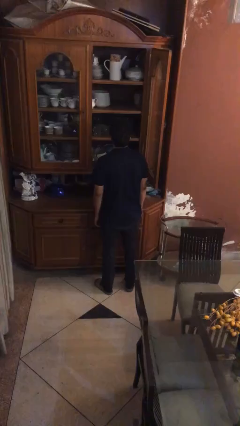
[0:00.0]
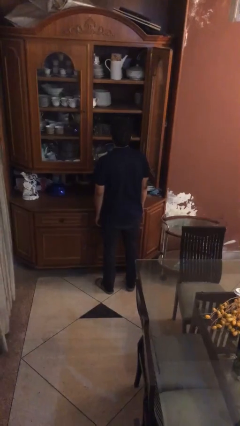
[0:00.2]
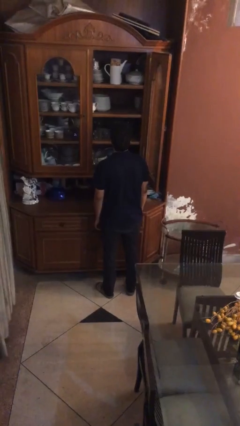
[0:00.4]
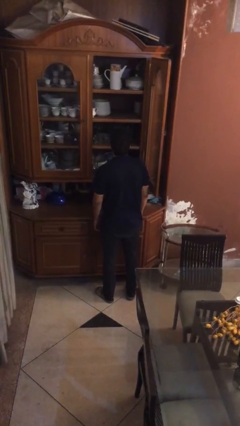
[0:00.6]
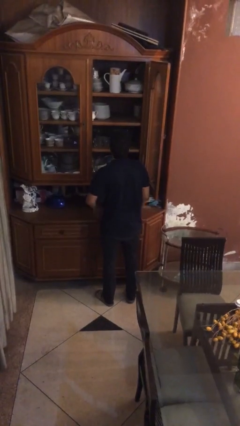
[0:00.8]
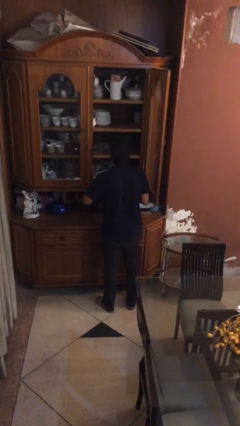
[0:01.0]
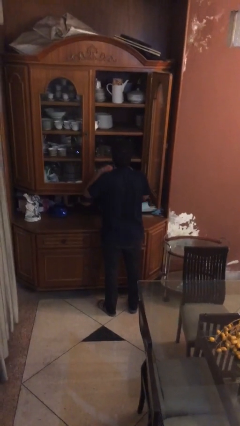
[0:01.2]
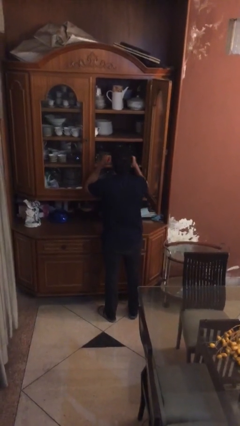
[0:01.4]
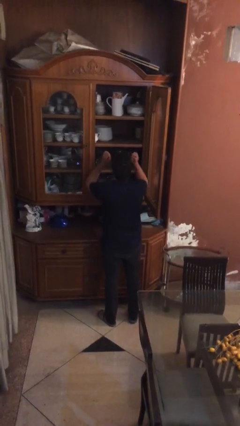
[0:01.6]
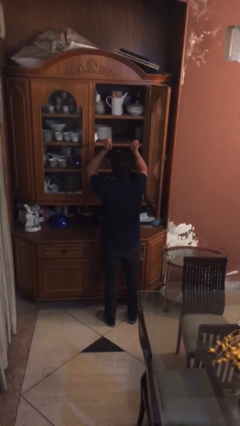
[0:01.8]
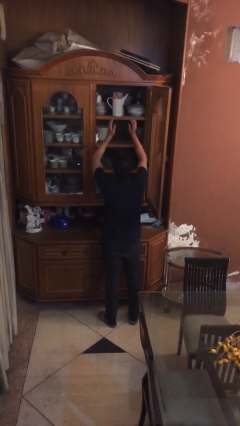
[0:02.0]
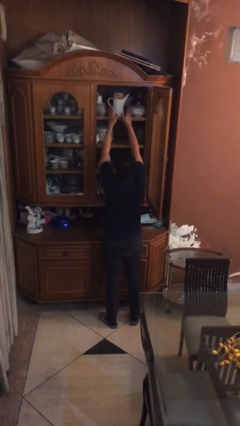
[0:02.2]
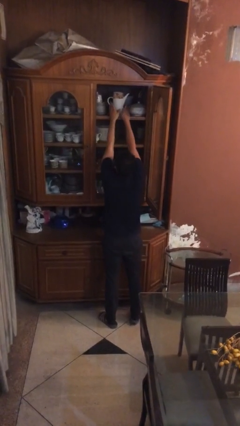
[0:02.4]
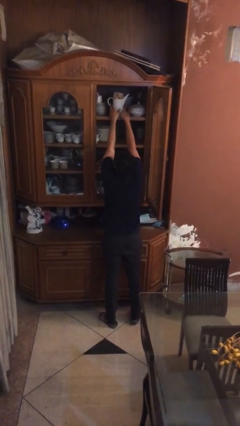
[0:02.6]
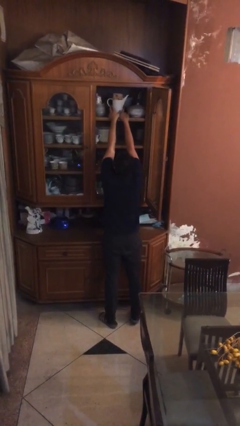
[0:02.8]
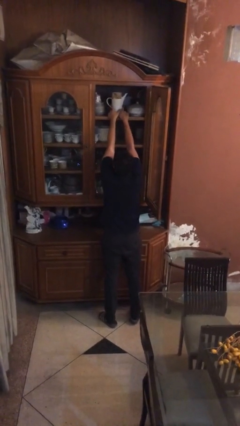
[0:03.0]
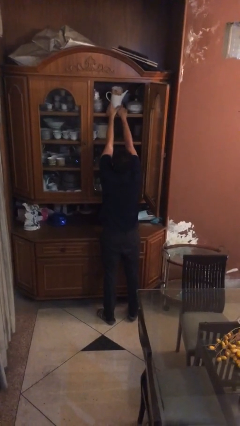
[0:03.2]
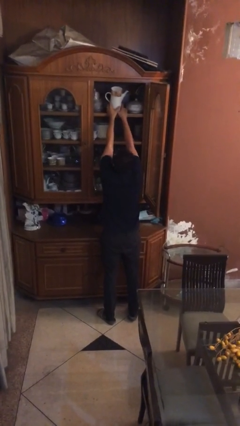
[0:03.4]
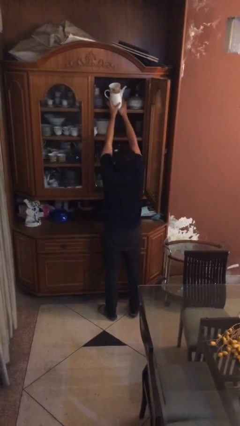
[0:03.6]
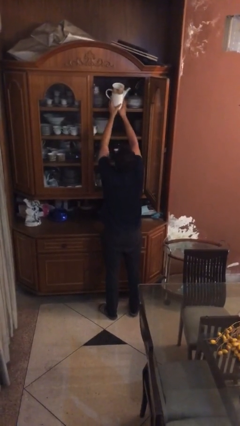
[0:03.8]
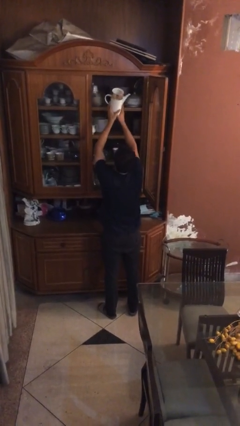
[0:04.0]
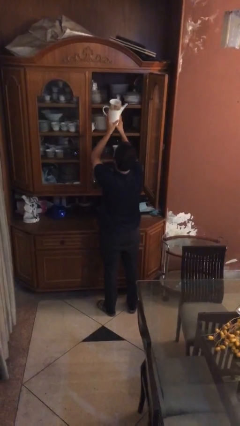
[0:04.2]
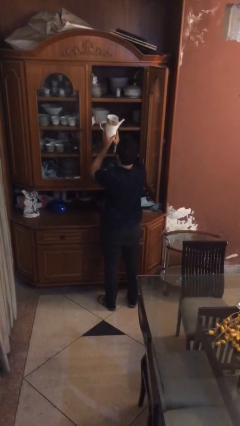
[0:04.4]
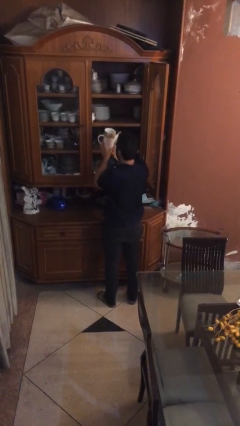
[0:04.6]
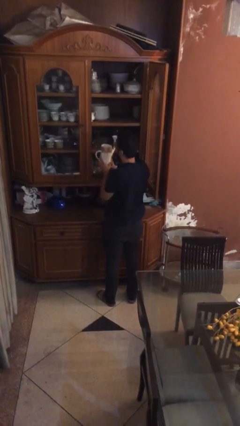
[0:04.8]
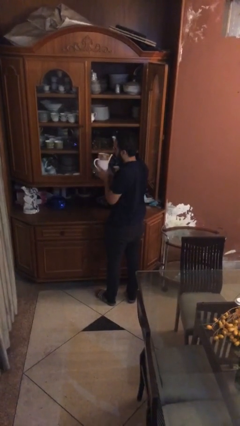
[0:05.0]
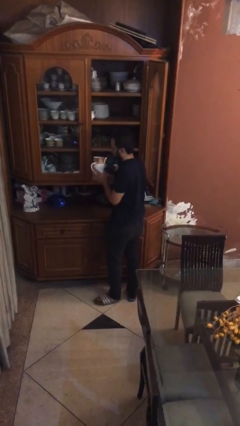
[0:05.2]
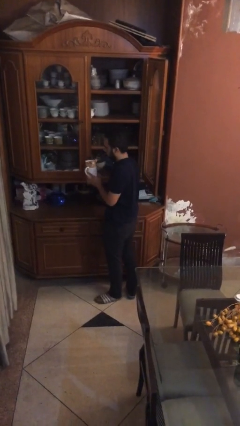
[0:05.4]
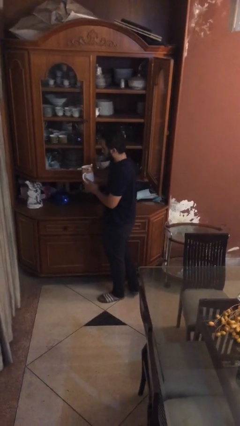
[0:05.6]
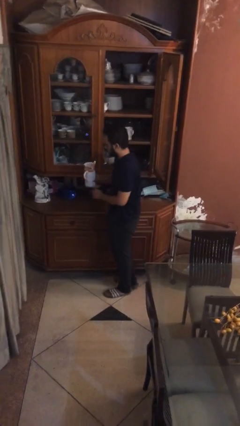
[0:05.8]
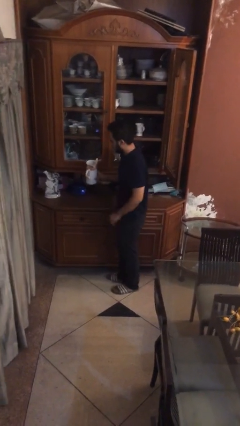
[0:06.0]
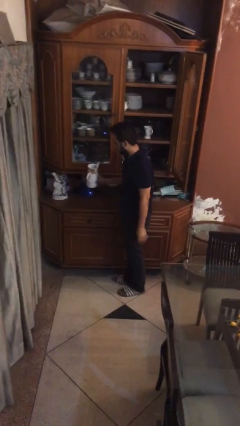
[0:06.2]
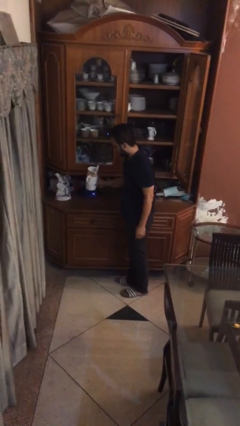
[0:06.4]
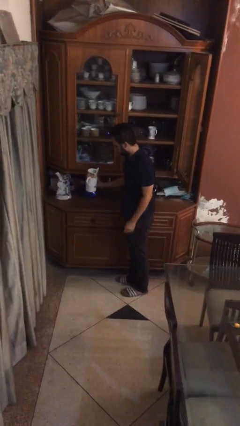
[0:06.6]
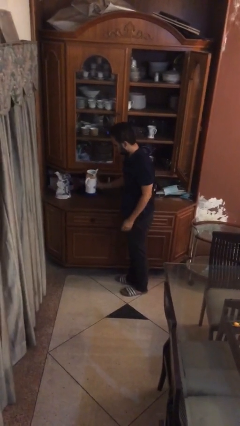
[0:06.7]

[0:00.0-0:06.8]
person picks up object from shelf

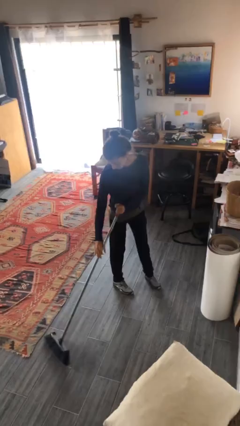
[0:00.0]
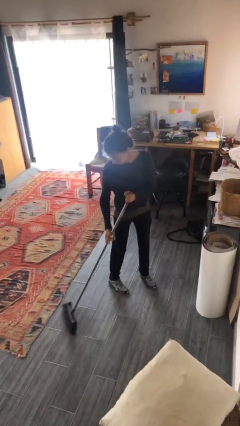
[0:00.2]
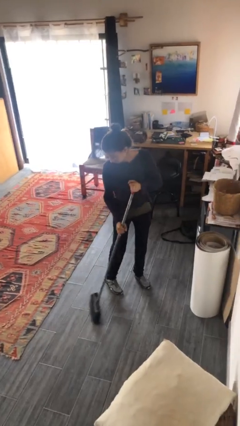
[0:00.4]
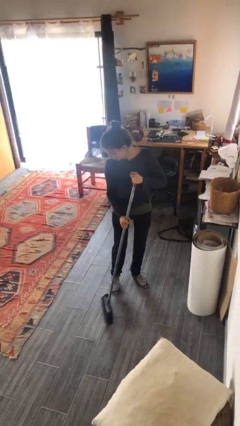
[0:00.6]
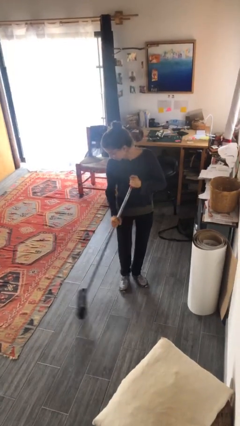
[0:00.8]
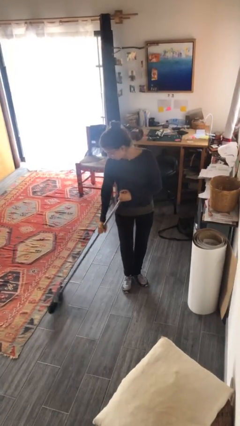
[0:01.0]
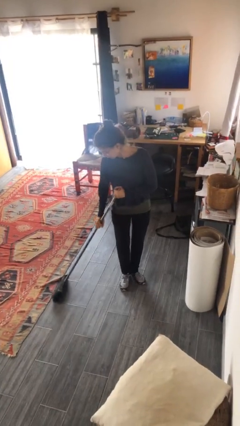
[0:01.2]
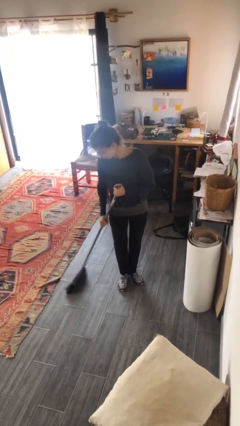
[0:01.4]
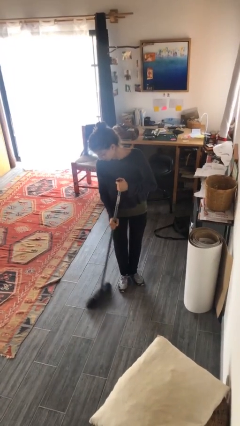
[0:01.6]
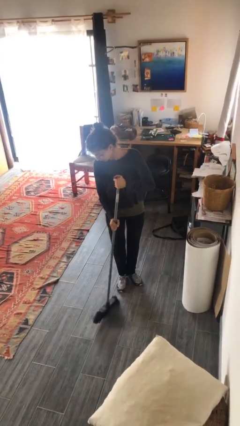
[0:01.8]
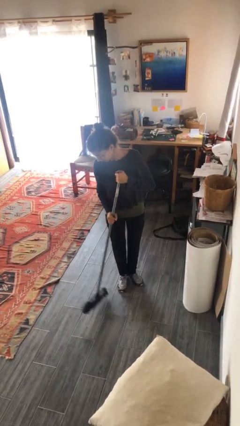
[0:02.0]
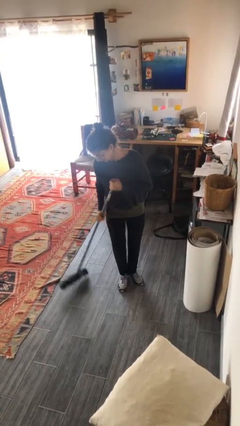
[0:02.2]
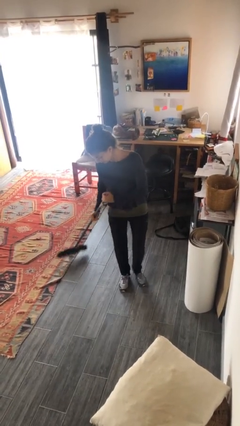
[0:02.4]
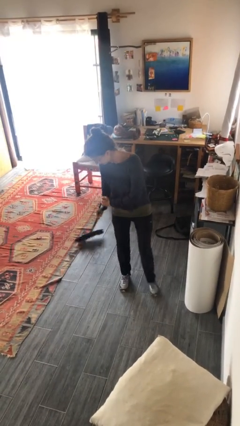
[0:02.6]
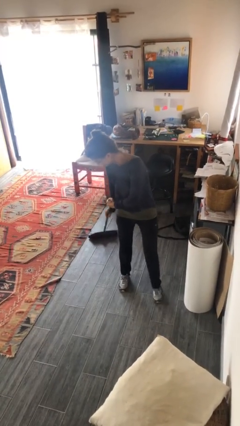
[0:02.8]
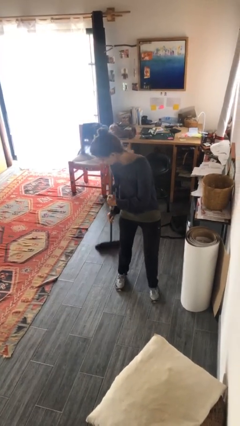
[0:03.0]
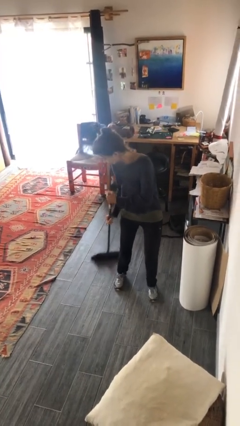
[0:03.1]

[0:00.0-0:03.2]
person sweeps floor

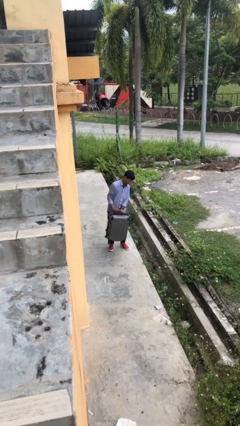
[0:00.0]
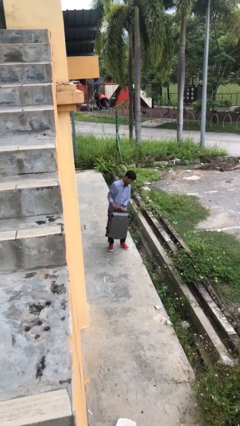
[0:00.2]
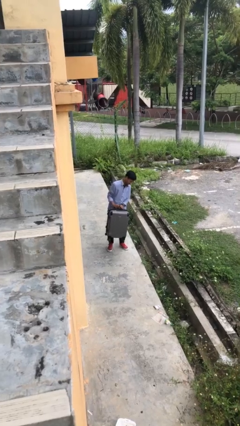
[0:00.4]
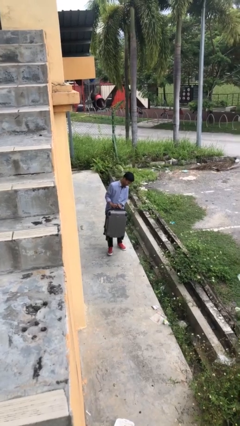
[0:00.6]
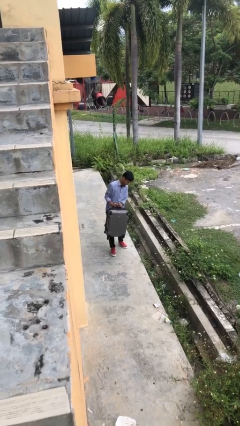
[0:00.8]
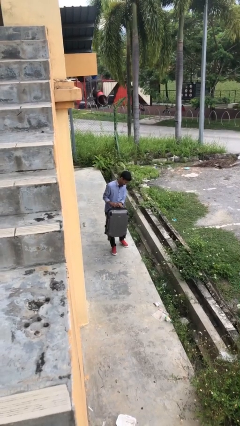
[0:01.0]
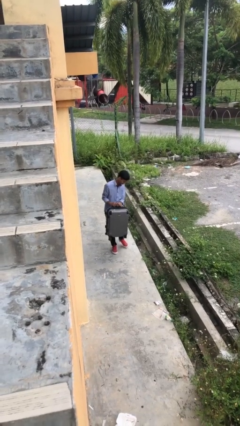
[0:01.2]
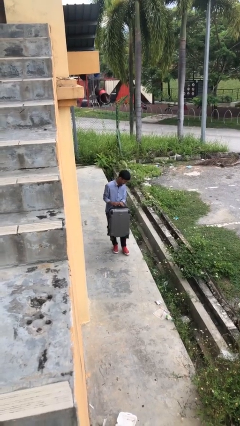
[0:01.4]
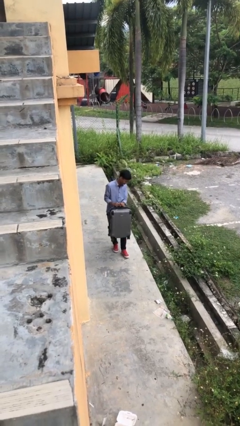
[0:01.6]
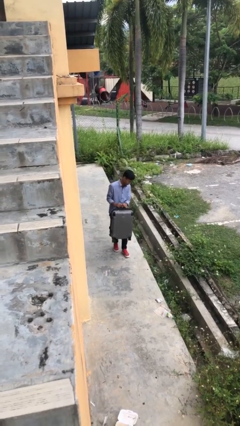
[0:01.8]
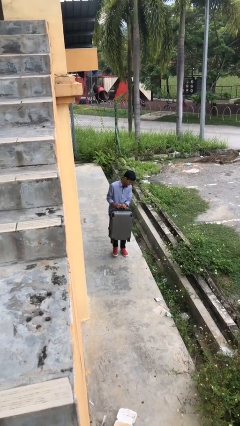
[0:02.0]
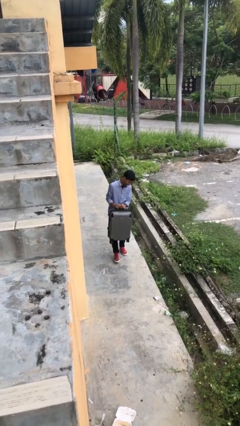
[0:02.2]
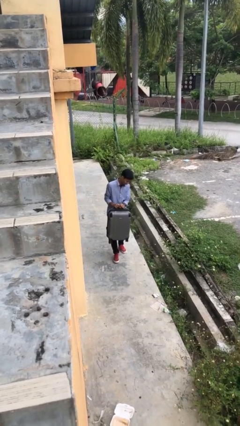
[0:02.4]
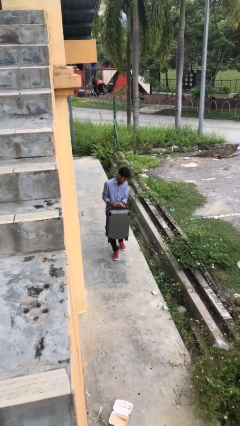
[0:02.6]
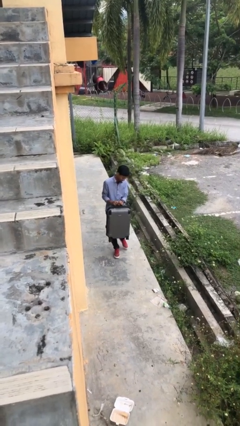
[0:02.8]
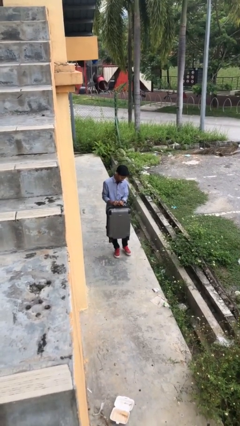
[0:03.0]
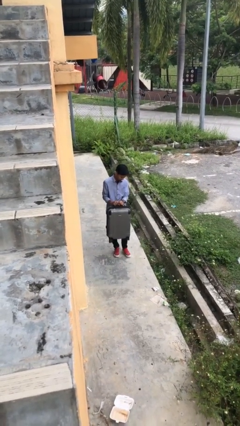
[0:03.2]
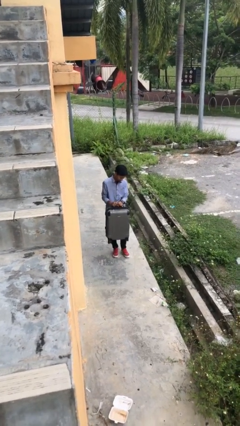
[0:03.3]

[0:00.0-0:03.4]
person carries heavy object

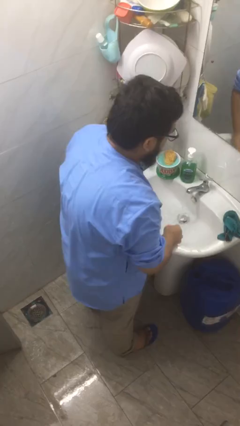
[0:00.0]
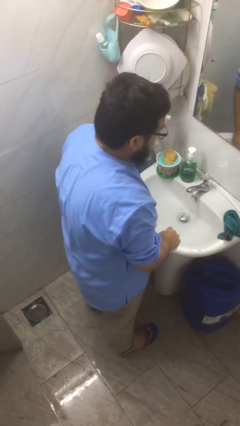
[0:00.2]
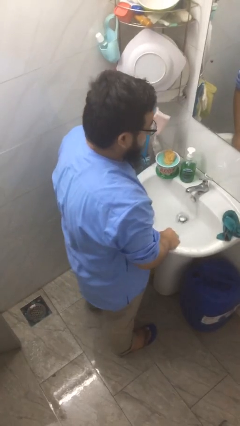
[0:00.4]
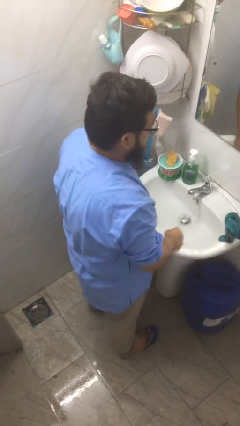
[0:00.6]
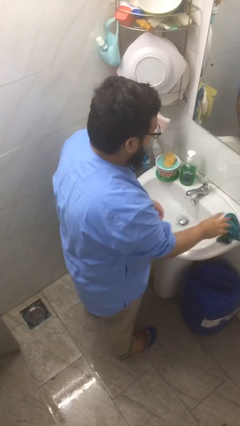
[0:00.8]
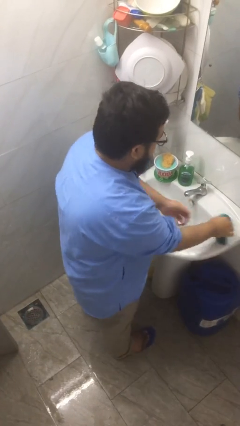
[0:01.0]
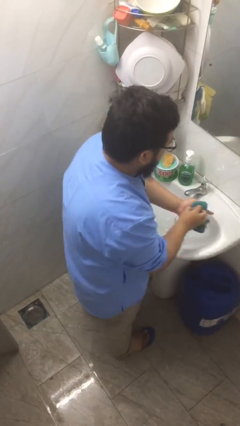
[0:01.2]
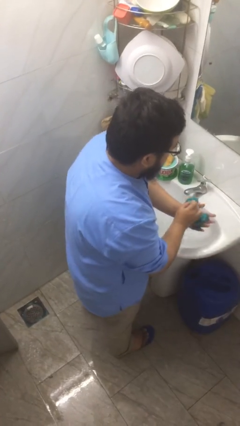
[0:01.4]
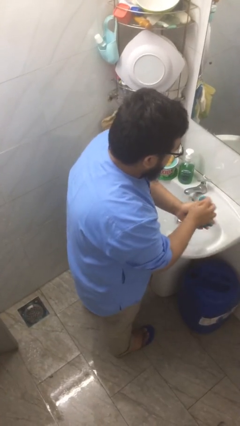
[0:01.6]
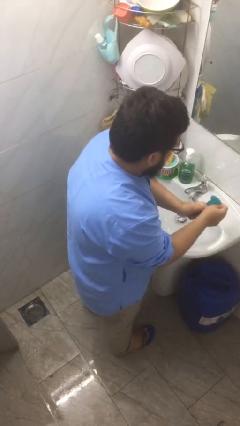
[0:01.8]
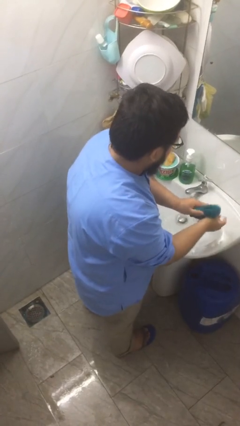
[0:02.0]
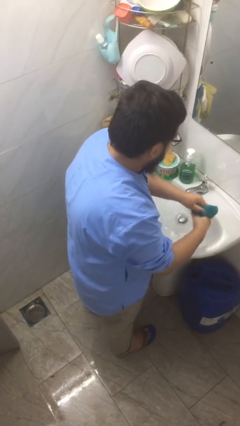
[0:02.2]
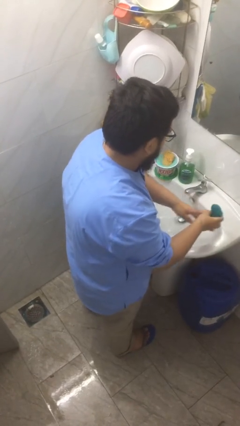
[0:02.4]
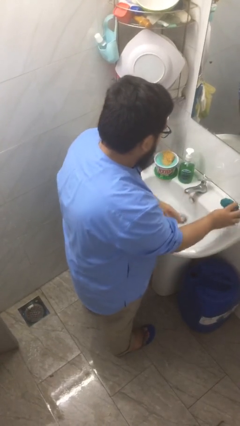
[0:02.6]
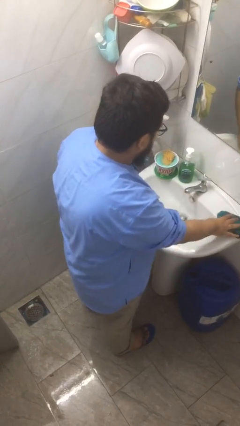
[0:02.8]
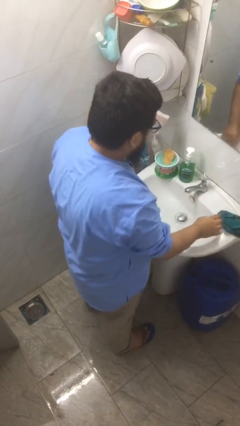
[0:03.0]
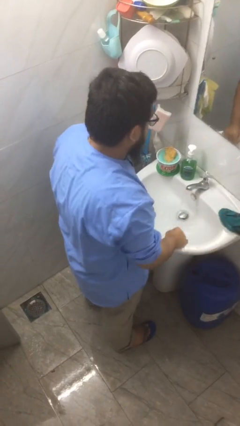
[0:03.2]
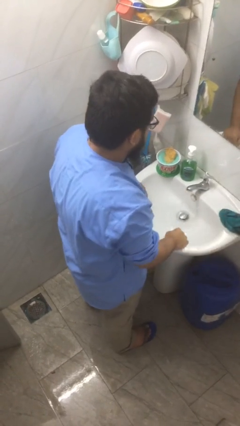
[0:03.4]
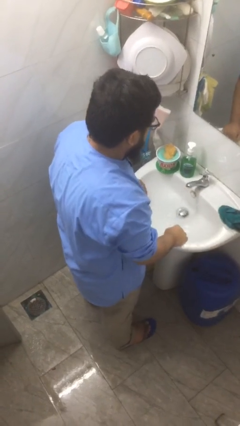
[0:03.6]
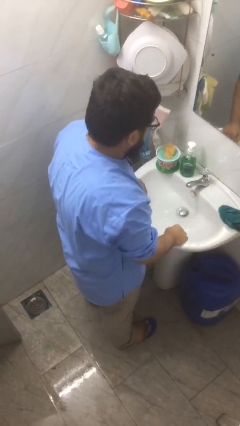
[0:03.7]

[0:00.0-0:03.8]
person dries hands with towel

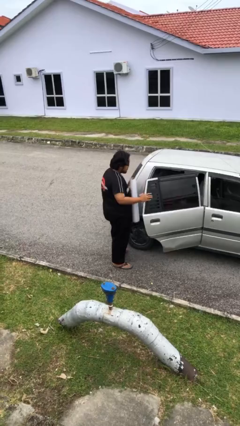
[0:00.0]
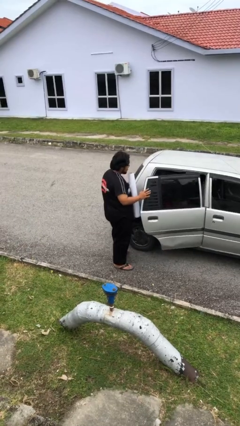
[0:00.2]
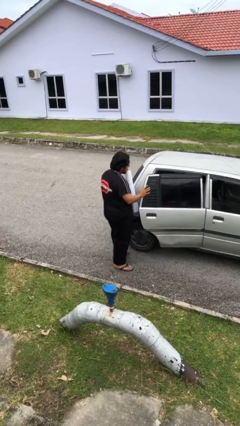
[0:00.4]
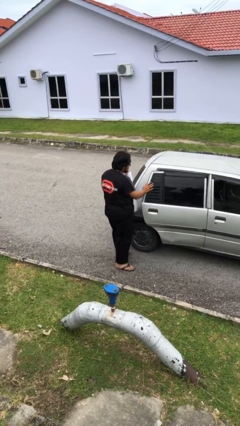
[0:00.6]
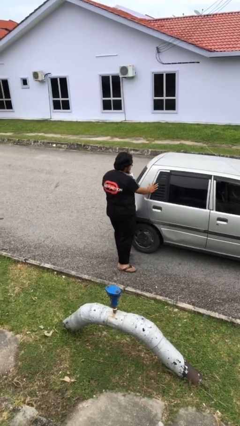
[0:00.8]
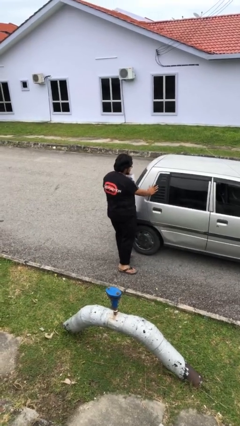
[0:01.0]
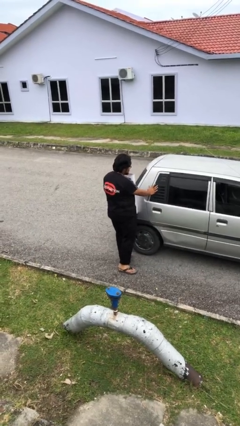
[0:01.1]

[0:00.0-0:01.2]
person closes car door
